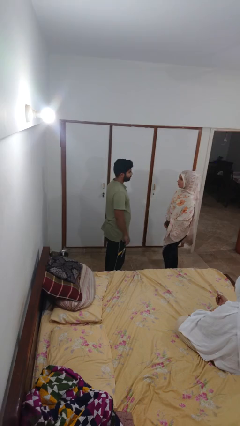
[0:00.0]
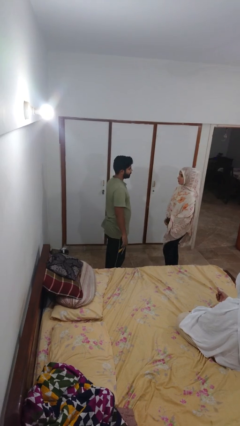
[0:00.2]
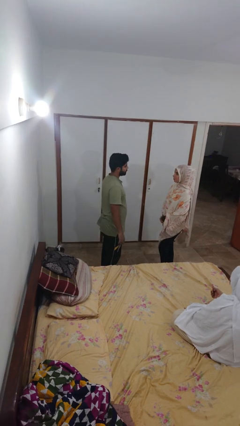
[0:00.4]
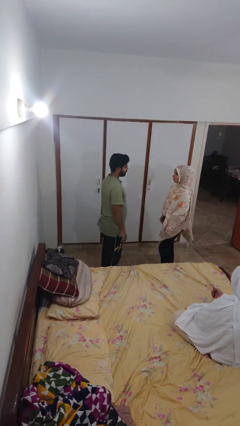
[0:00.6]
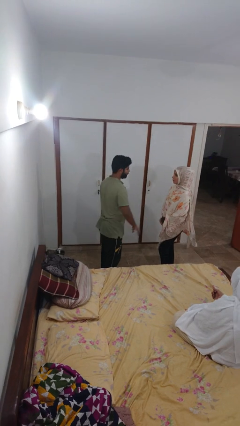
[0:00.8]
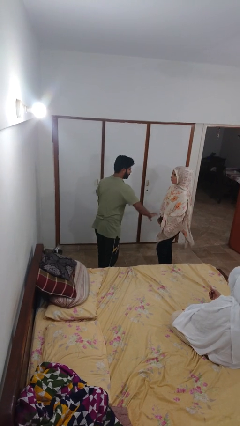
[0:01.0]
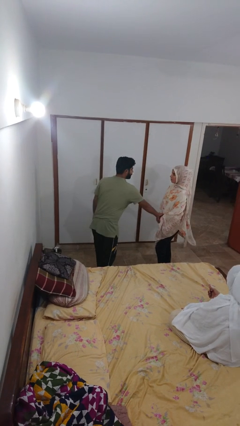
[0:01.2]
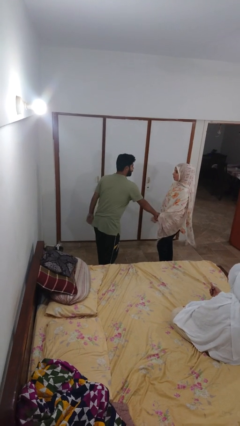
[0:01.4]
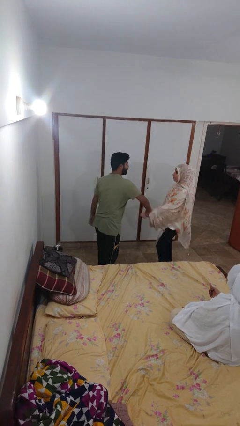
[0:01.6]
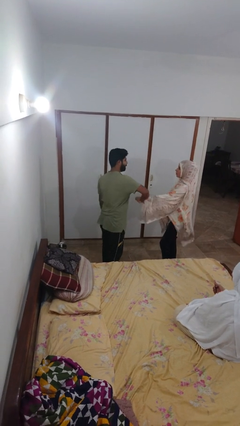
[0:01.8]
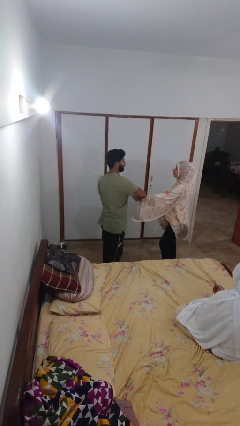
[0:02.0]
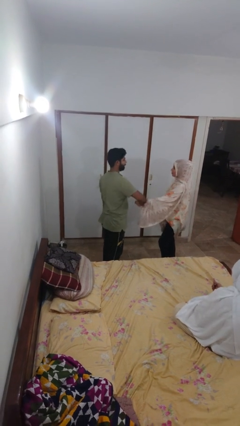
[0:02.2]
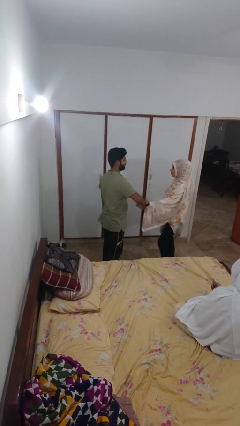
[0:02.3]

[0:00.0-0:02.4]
person grabs person by forearm

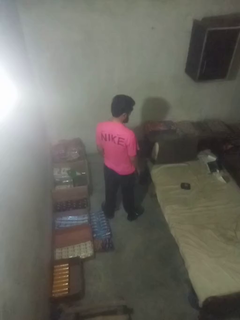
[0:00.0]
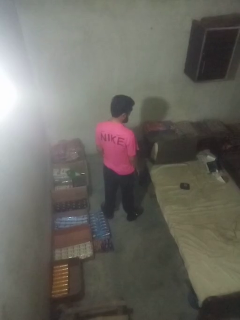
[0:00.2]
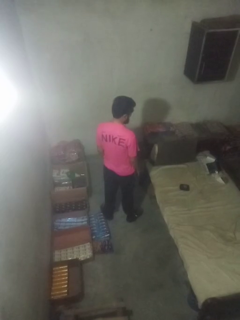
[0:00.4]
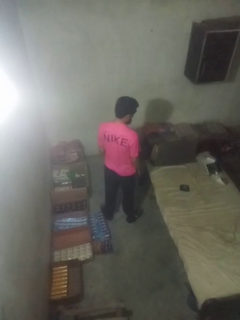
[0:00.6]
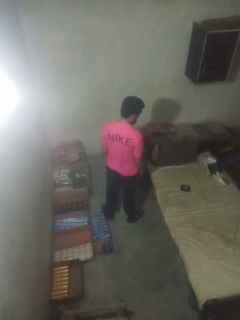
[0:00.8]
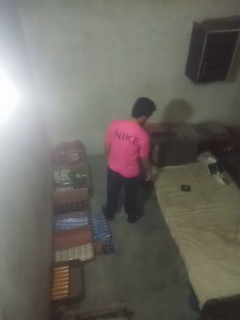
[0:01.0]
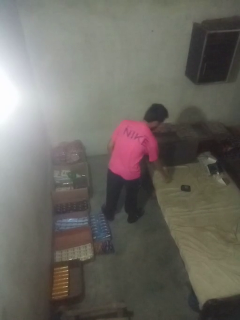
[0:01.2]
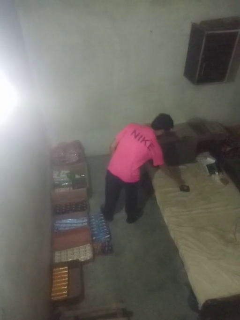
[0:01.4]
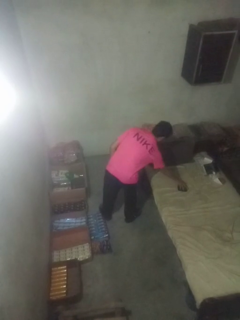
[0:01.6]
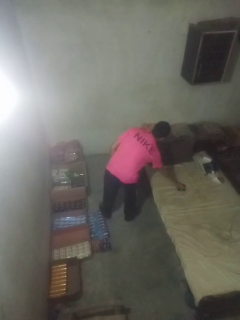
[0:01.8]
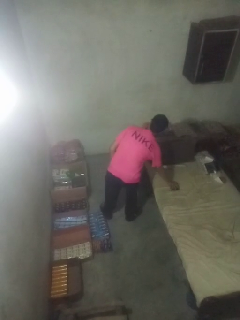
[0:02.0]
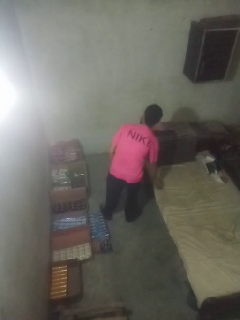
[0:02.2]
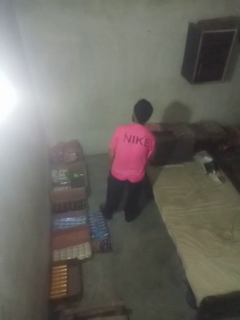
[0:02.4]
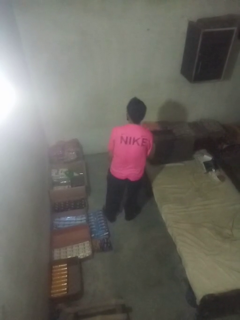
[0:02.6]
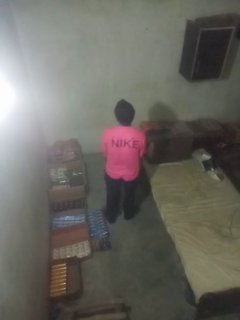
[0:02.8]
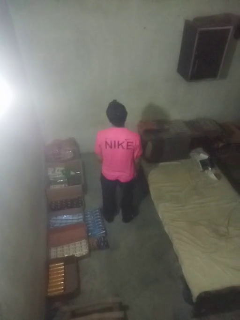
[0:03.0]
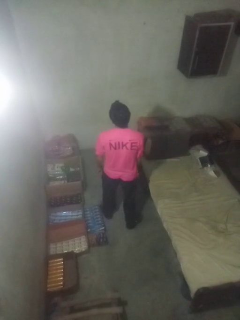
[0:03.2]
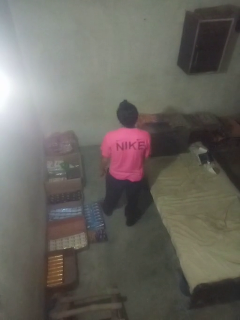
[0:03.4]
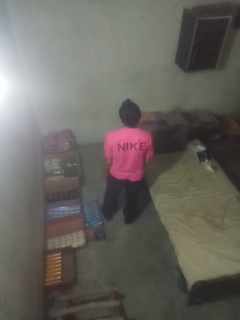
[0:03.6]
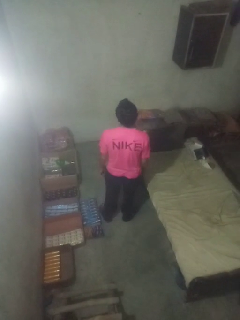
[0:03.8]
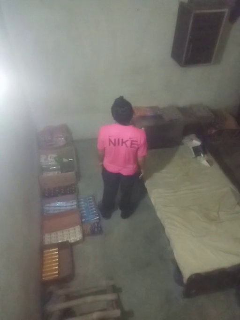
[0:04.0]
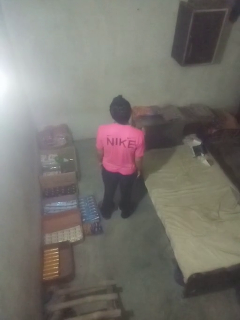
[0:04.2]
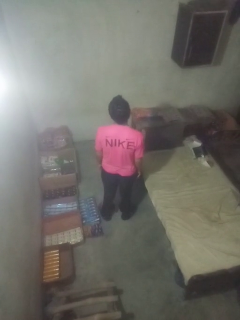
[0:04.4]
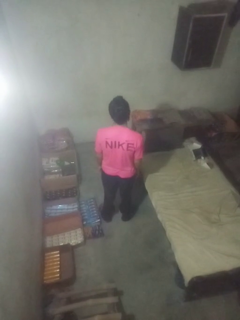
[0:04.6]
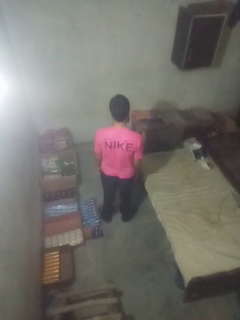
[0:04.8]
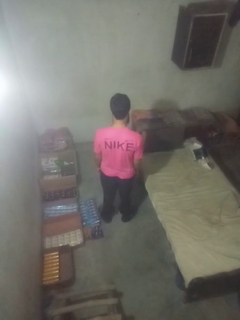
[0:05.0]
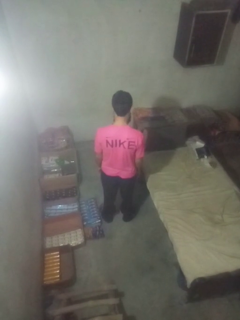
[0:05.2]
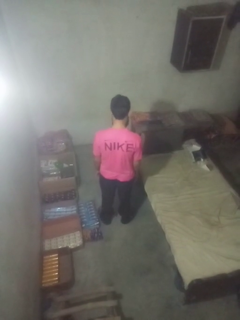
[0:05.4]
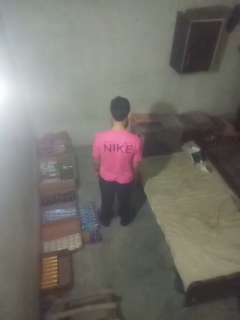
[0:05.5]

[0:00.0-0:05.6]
person picks up object from bed

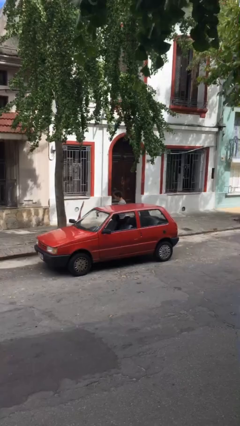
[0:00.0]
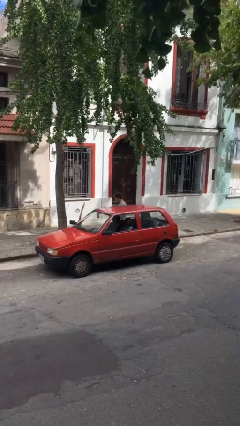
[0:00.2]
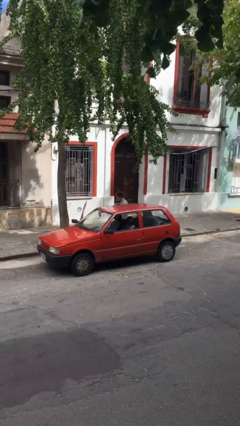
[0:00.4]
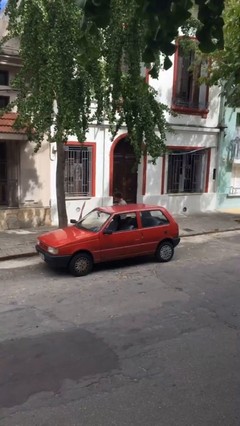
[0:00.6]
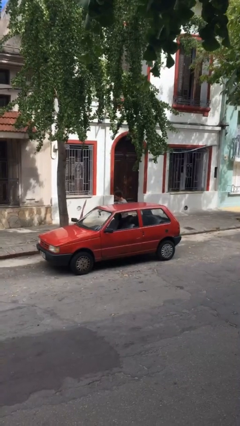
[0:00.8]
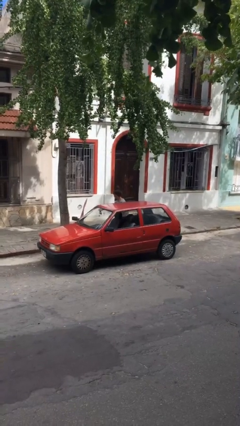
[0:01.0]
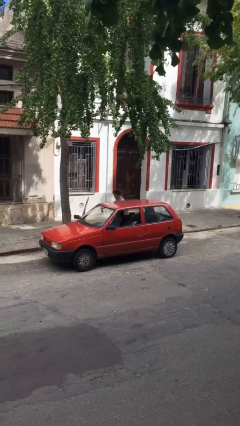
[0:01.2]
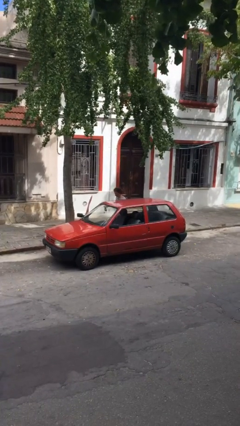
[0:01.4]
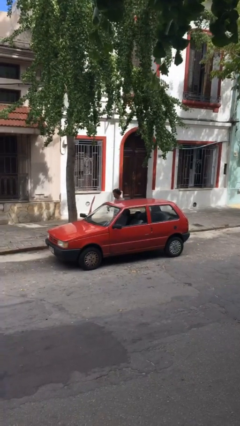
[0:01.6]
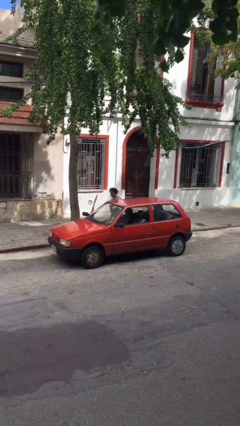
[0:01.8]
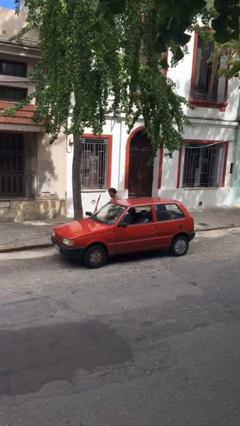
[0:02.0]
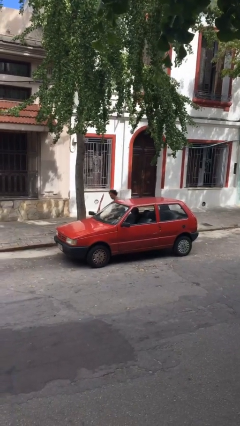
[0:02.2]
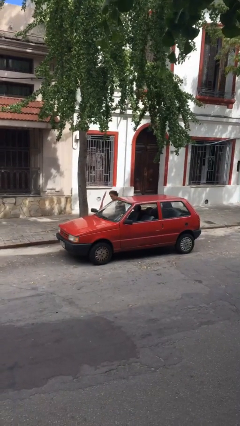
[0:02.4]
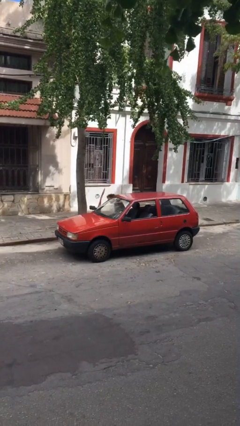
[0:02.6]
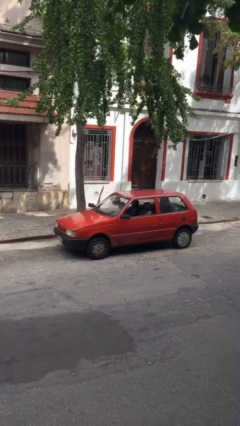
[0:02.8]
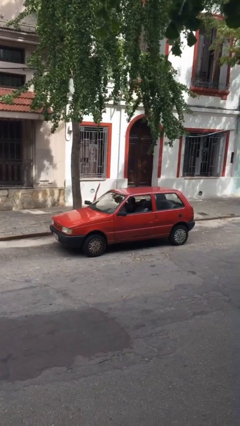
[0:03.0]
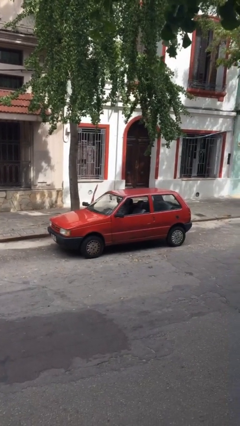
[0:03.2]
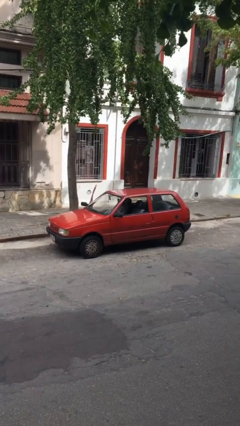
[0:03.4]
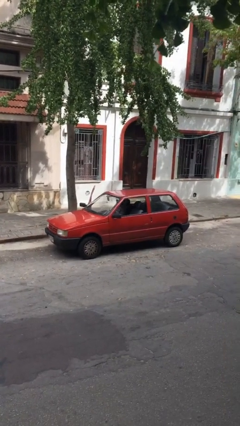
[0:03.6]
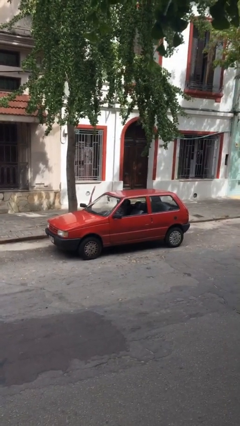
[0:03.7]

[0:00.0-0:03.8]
person enters car

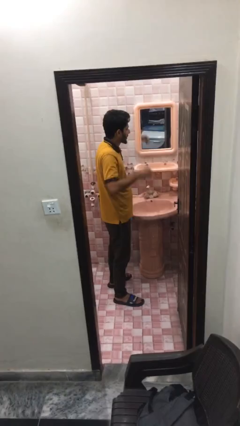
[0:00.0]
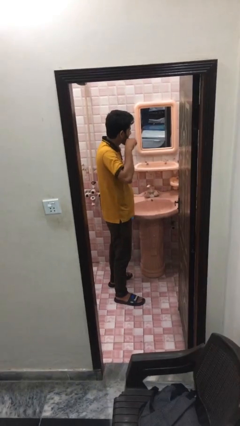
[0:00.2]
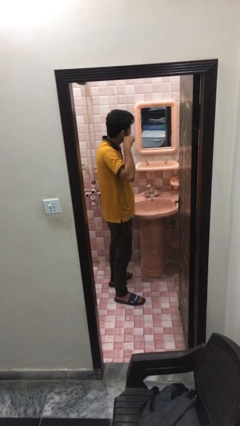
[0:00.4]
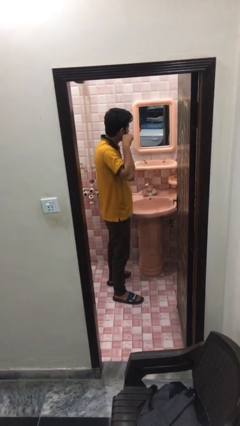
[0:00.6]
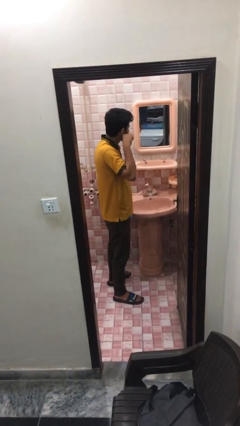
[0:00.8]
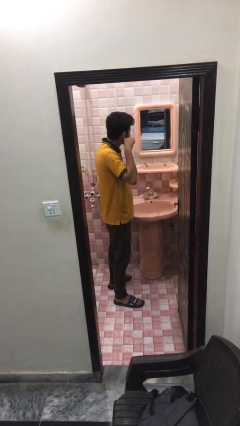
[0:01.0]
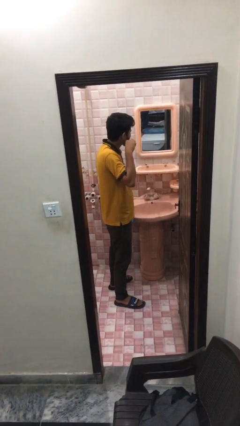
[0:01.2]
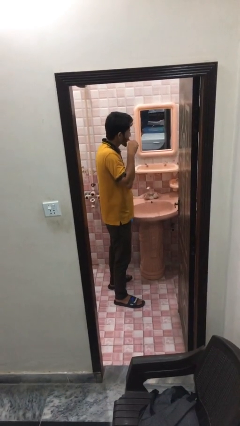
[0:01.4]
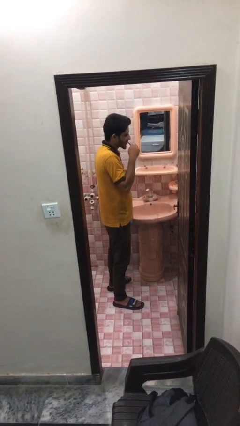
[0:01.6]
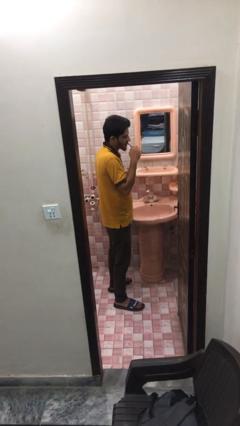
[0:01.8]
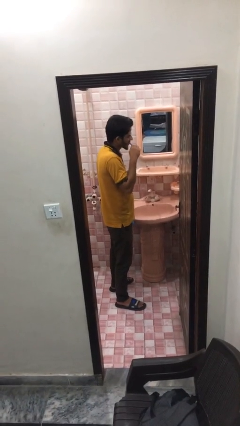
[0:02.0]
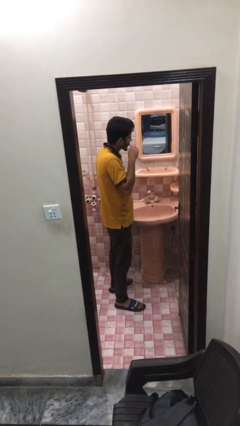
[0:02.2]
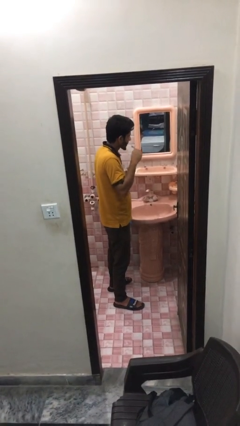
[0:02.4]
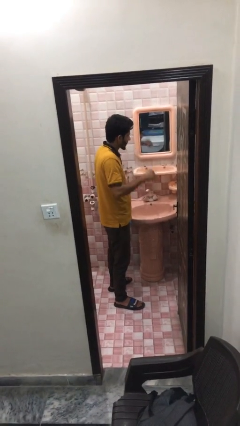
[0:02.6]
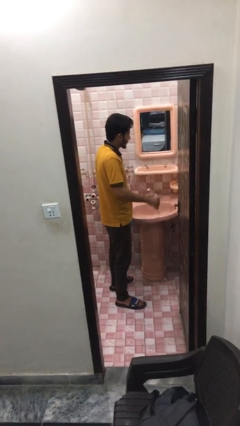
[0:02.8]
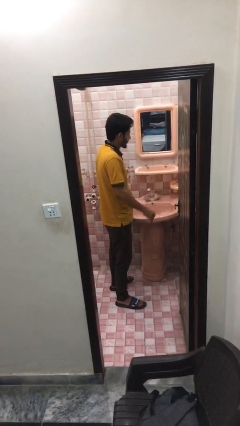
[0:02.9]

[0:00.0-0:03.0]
person brushes teeth

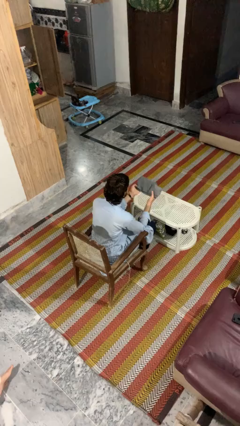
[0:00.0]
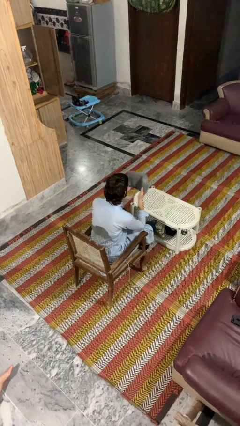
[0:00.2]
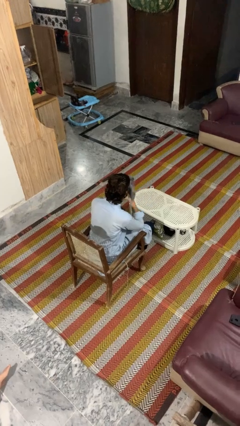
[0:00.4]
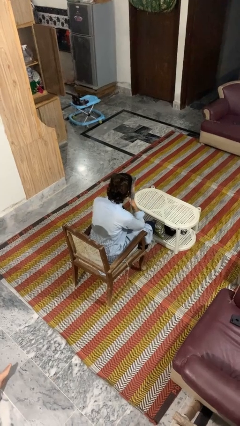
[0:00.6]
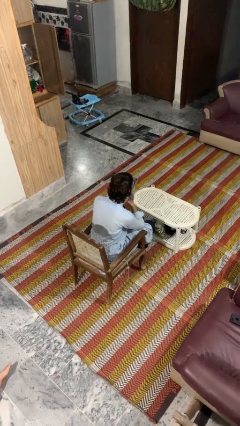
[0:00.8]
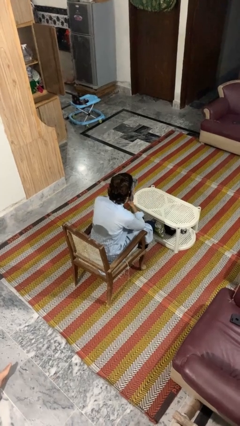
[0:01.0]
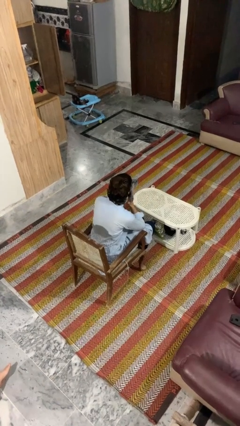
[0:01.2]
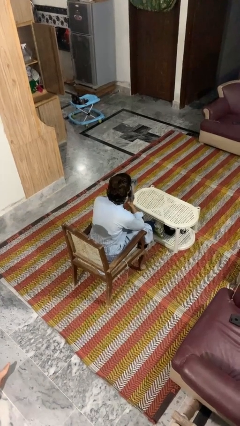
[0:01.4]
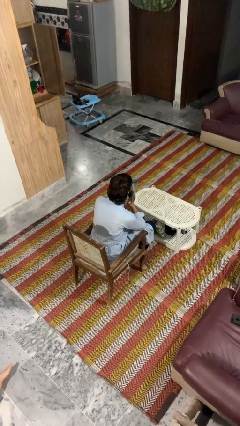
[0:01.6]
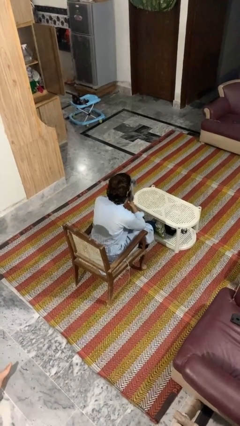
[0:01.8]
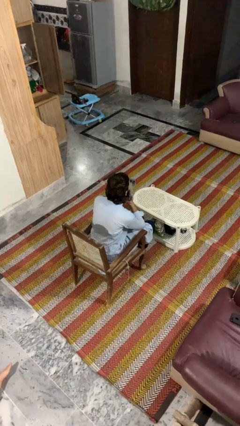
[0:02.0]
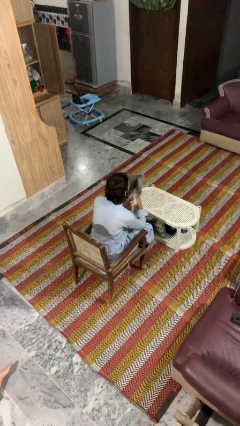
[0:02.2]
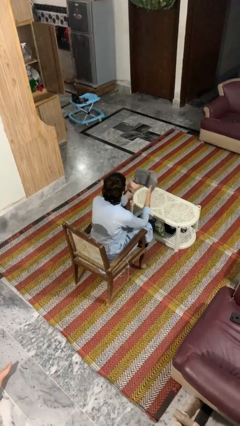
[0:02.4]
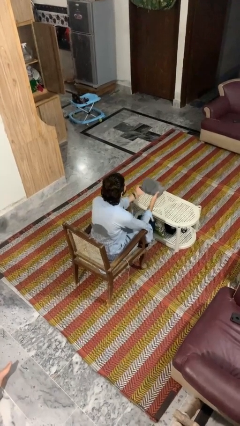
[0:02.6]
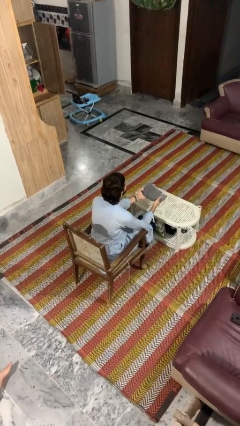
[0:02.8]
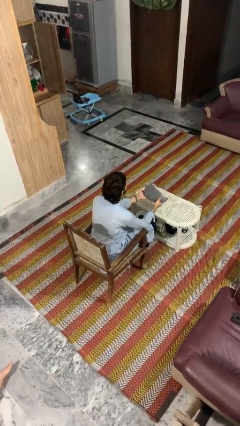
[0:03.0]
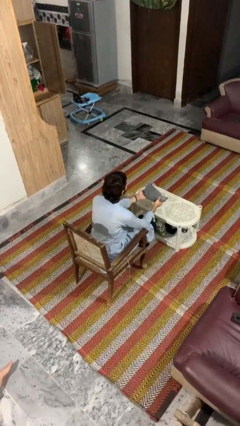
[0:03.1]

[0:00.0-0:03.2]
person wipes mouth with napkin

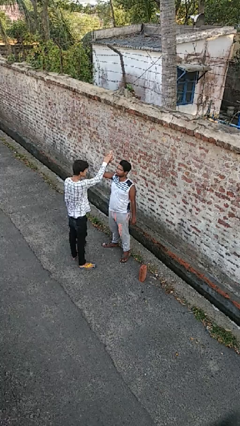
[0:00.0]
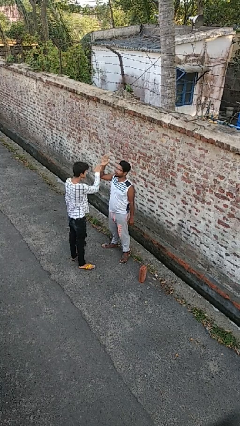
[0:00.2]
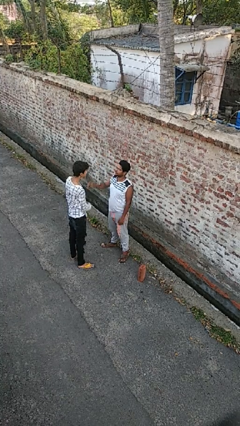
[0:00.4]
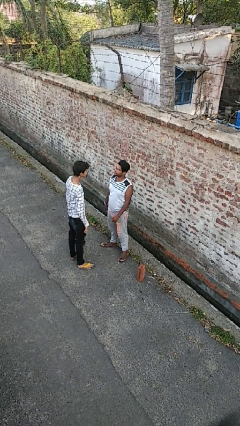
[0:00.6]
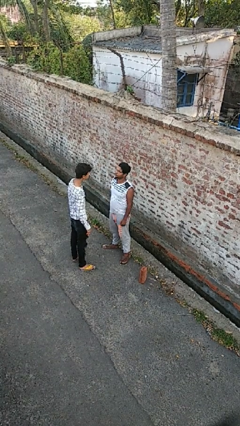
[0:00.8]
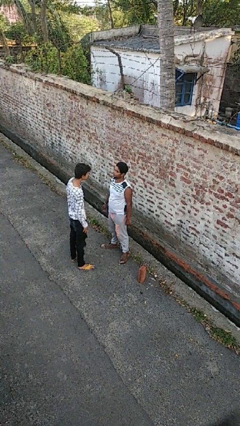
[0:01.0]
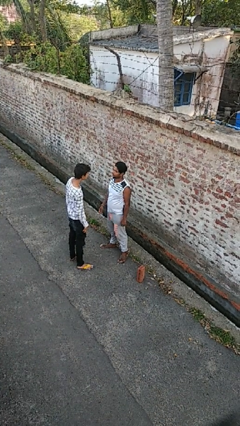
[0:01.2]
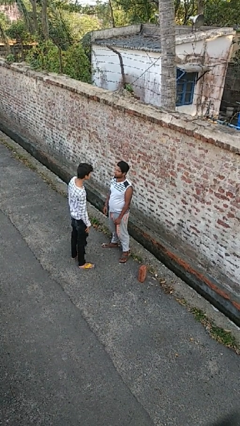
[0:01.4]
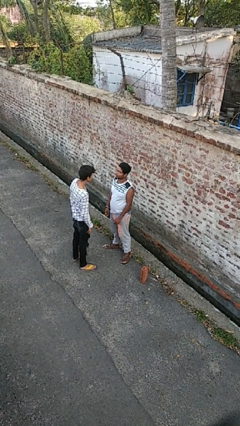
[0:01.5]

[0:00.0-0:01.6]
person highfives hand
